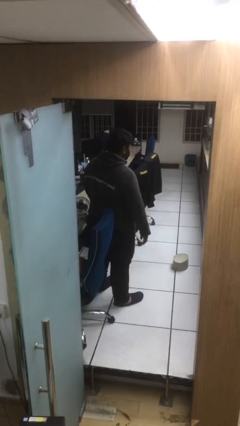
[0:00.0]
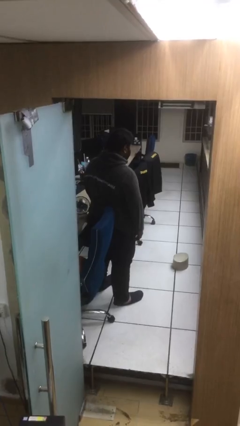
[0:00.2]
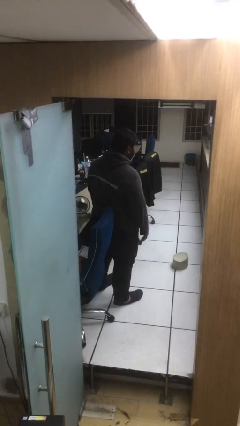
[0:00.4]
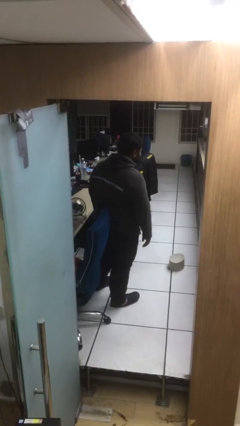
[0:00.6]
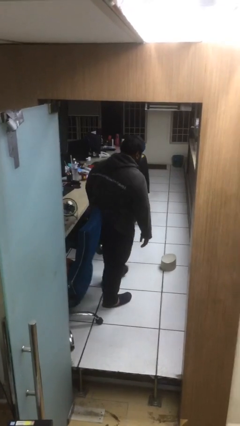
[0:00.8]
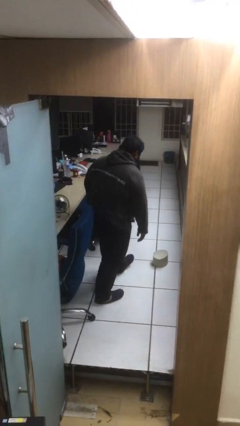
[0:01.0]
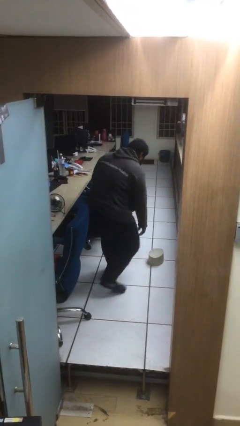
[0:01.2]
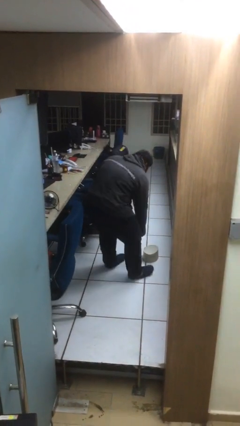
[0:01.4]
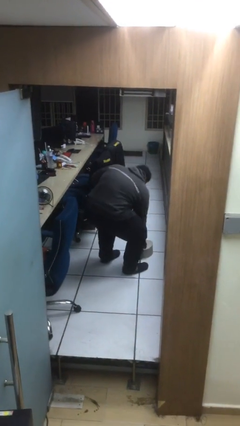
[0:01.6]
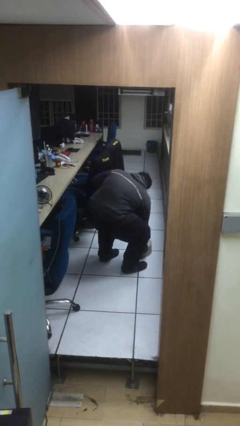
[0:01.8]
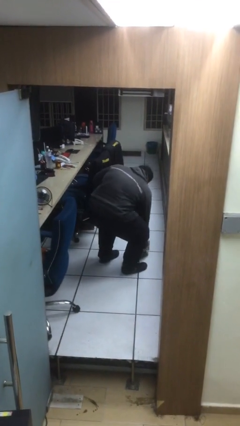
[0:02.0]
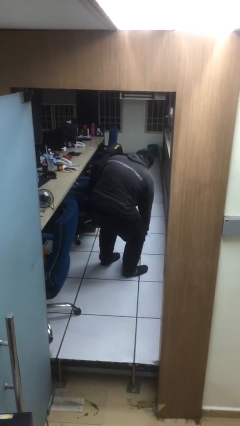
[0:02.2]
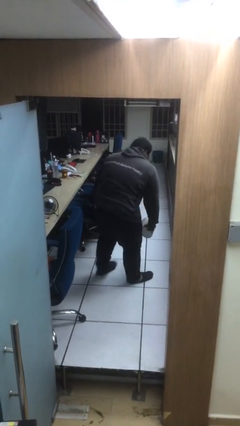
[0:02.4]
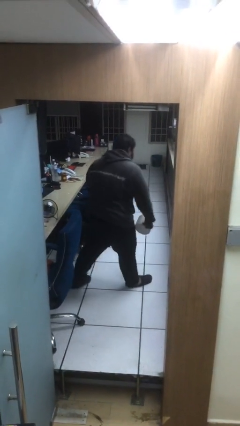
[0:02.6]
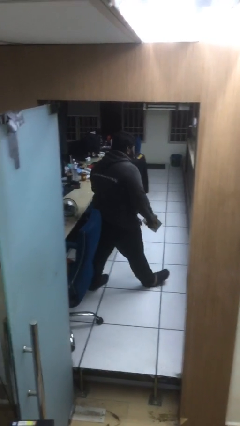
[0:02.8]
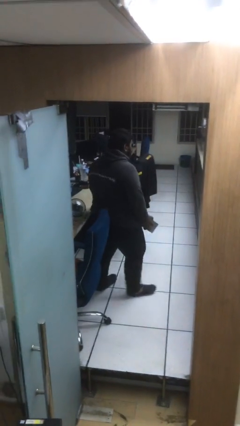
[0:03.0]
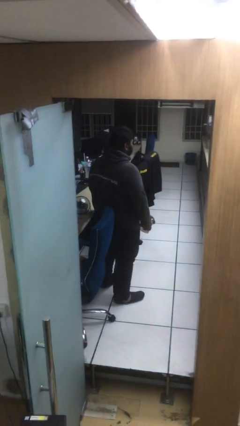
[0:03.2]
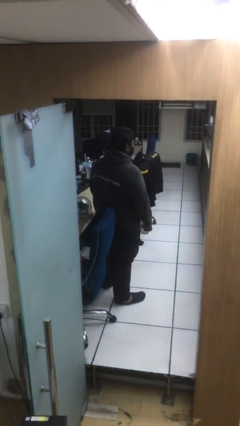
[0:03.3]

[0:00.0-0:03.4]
person picks up object from floor

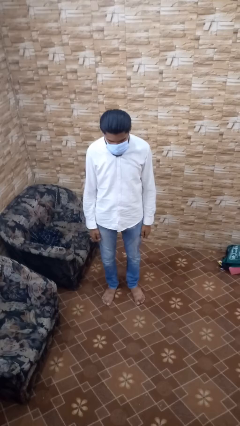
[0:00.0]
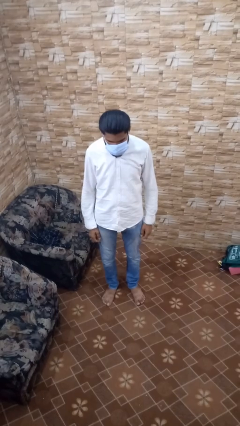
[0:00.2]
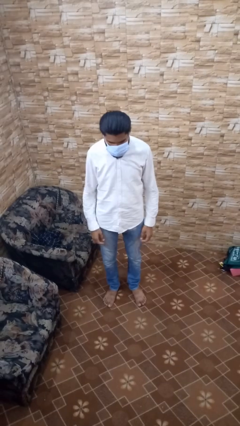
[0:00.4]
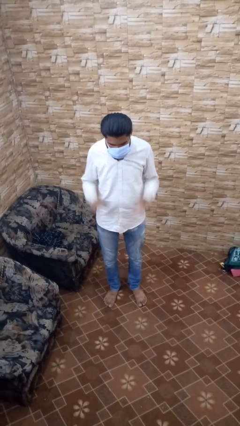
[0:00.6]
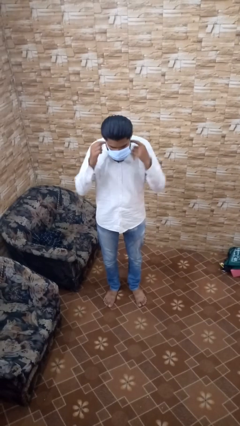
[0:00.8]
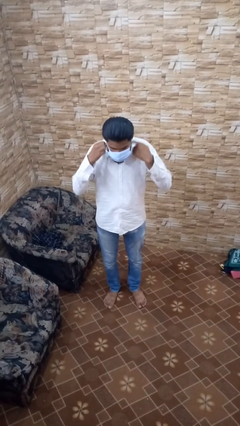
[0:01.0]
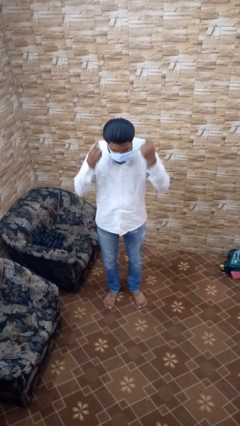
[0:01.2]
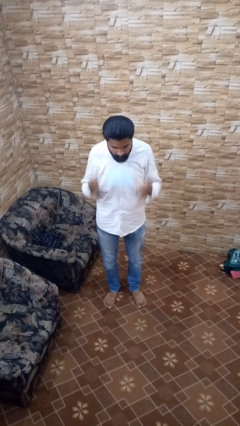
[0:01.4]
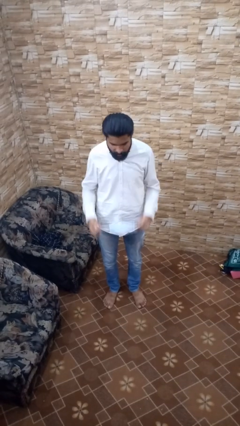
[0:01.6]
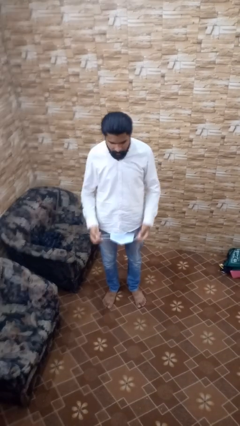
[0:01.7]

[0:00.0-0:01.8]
person takes off facemask

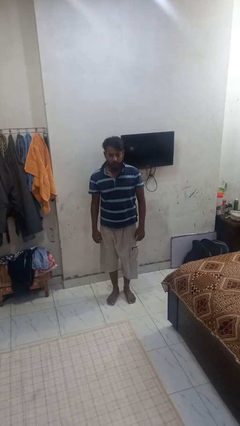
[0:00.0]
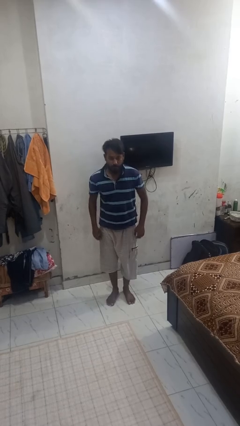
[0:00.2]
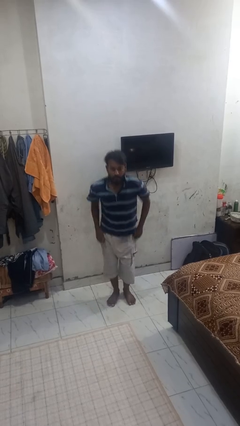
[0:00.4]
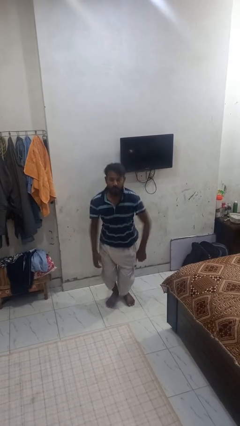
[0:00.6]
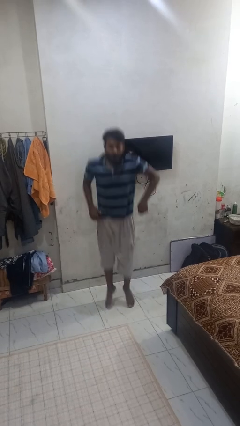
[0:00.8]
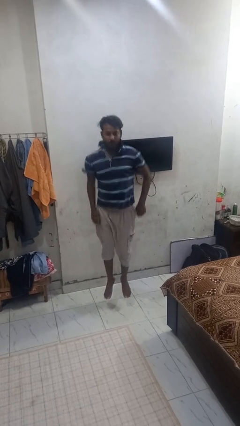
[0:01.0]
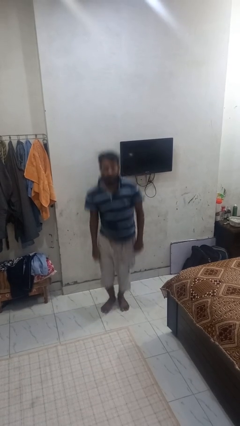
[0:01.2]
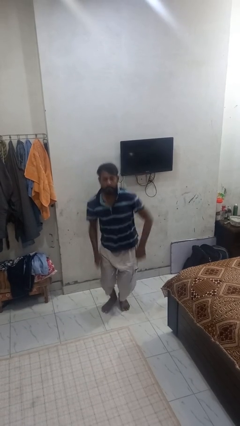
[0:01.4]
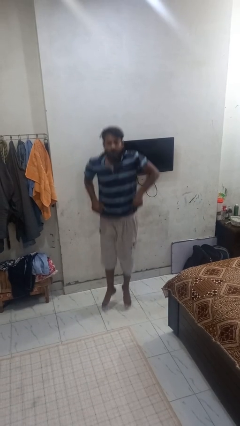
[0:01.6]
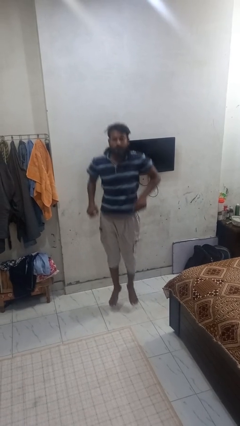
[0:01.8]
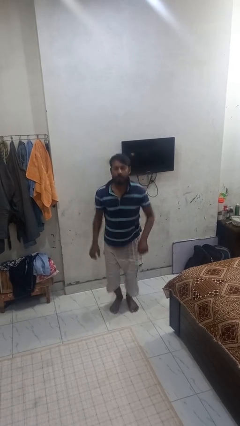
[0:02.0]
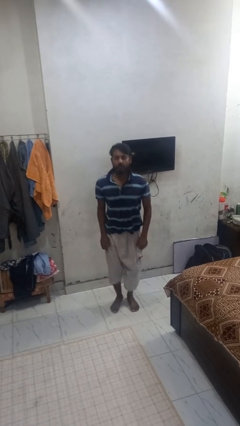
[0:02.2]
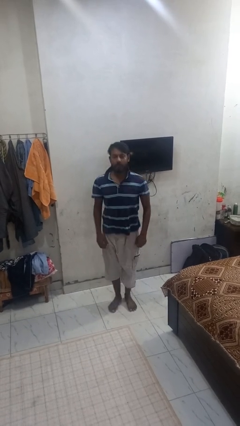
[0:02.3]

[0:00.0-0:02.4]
person jumps

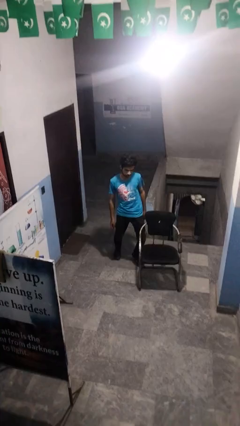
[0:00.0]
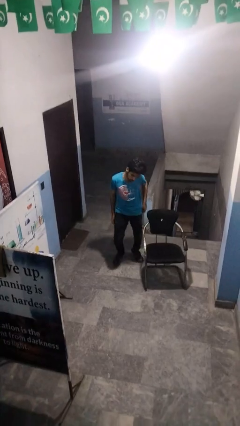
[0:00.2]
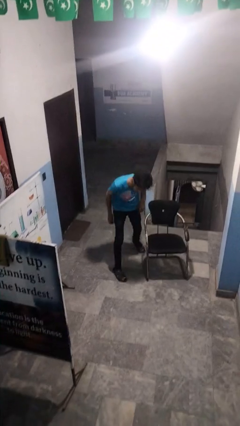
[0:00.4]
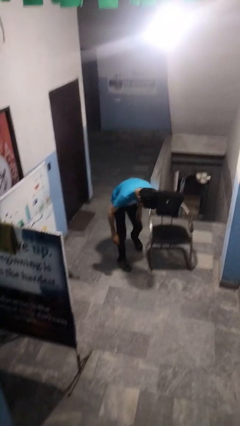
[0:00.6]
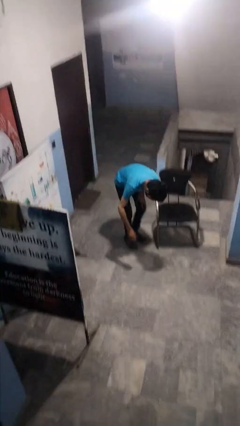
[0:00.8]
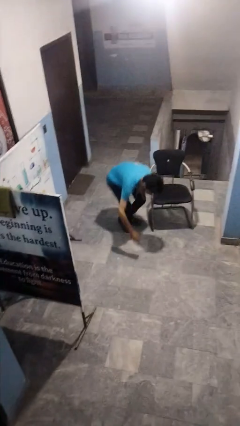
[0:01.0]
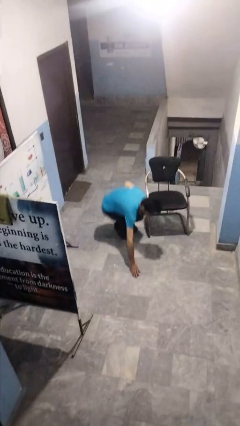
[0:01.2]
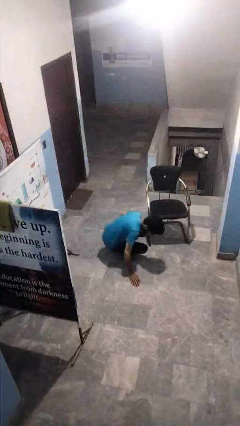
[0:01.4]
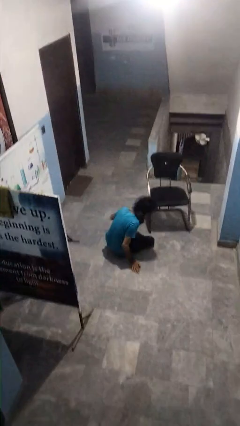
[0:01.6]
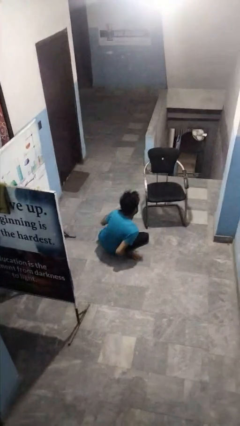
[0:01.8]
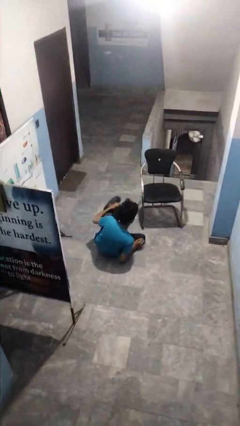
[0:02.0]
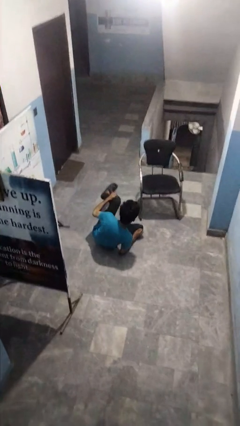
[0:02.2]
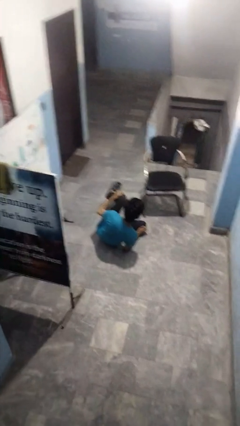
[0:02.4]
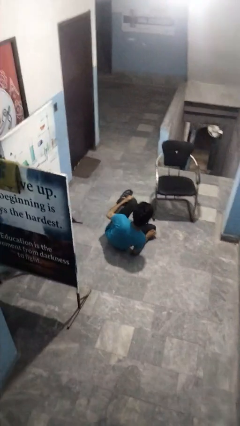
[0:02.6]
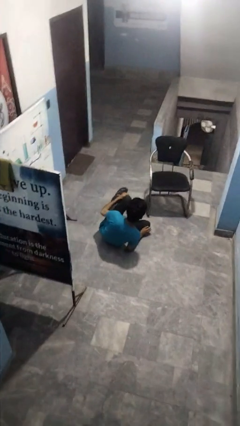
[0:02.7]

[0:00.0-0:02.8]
person trips on object on floor

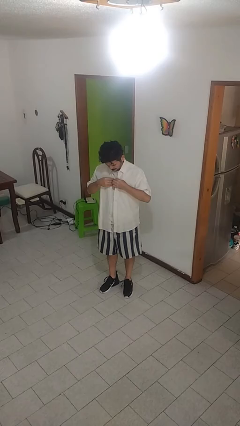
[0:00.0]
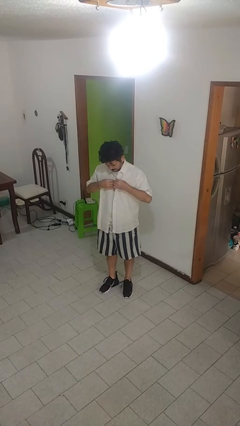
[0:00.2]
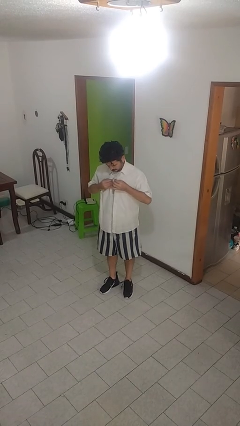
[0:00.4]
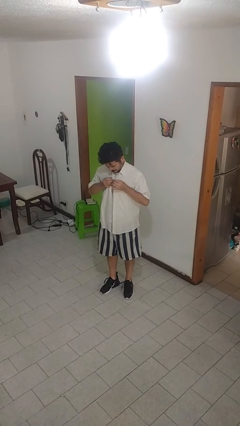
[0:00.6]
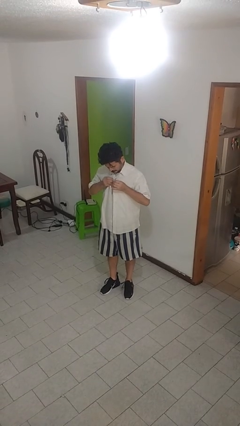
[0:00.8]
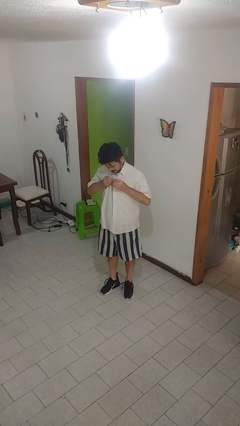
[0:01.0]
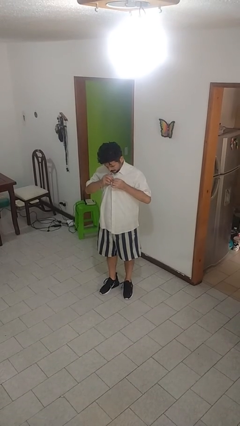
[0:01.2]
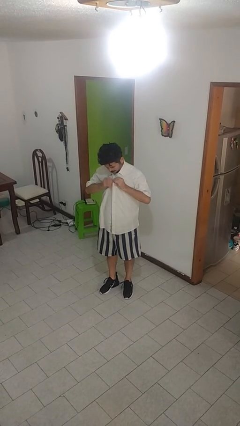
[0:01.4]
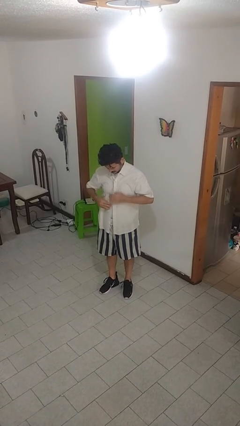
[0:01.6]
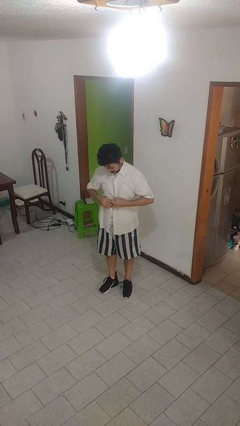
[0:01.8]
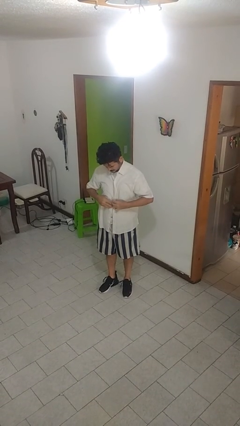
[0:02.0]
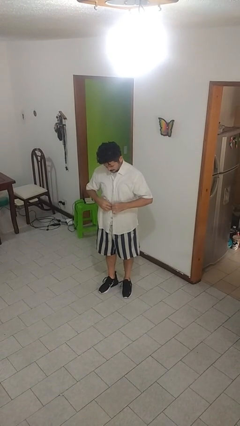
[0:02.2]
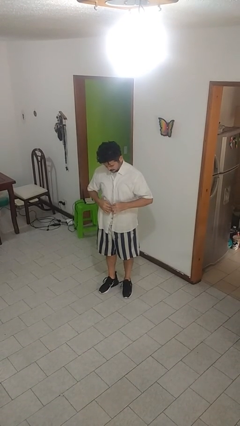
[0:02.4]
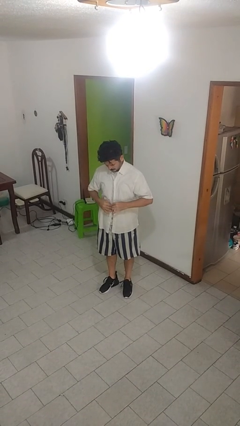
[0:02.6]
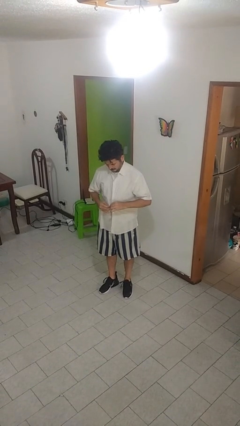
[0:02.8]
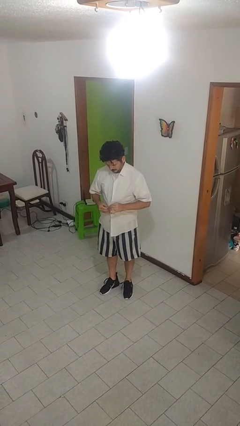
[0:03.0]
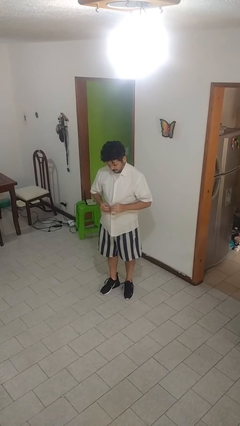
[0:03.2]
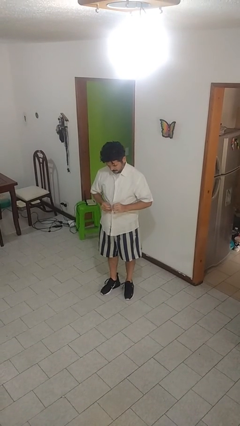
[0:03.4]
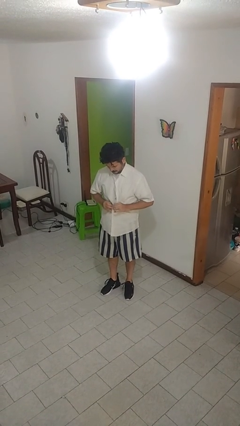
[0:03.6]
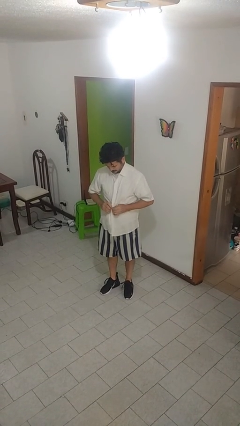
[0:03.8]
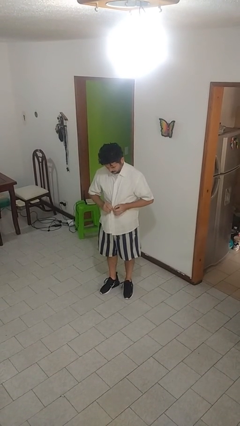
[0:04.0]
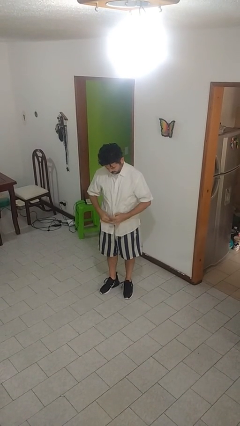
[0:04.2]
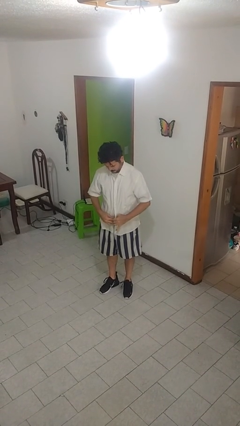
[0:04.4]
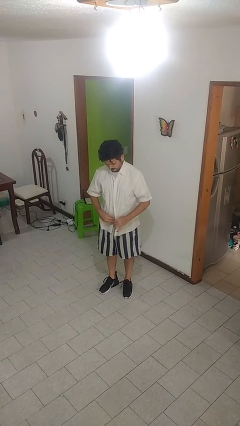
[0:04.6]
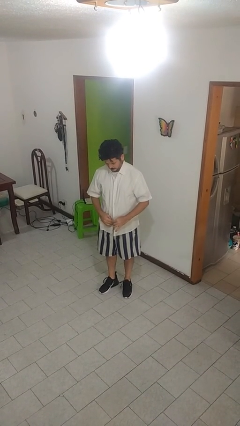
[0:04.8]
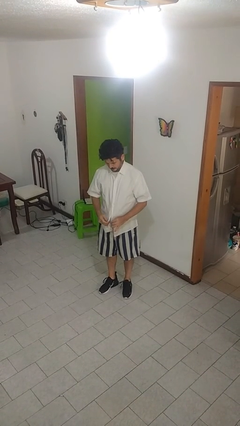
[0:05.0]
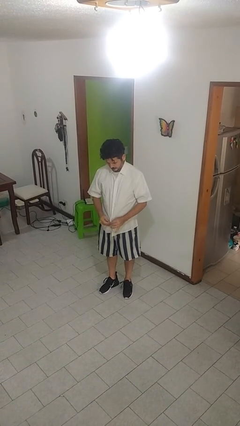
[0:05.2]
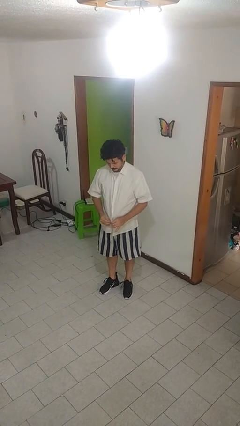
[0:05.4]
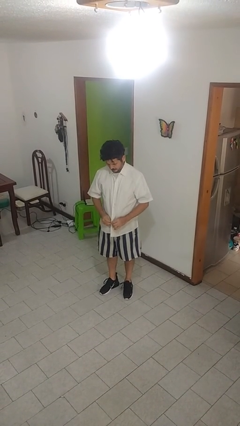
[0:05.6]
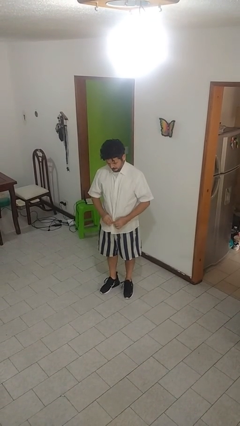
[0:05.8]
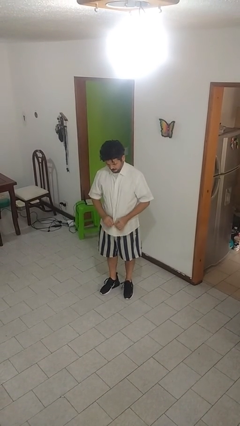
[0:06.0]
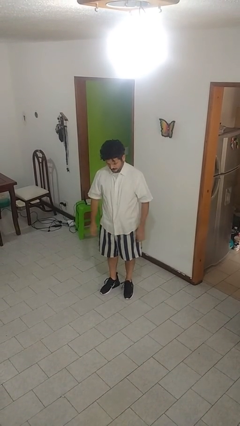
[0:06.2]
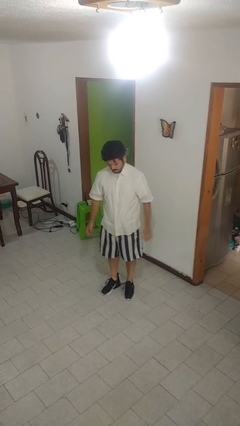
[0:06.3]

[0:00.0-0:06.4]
person buttons shirt

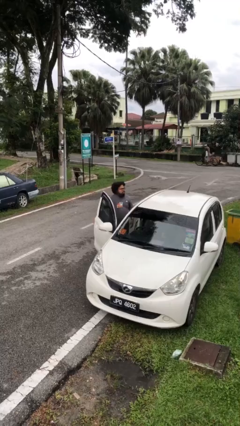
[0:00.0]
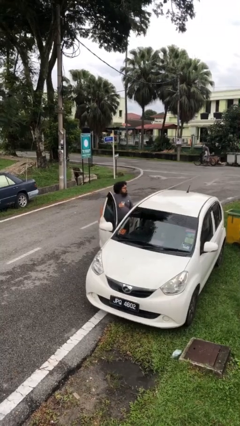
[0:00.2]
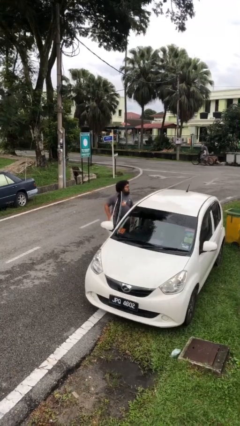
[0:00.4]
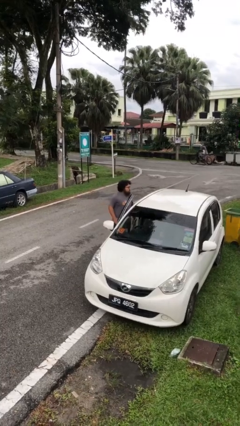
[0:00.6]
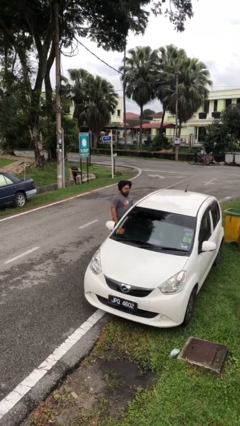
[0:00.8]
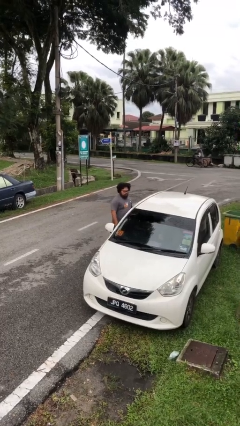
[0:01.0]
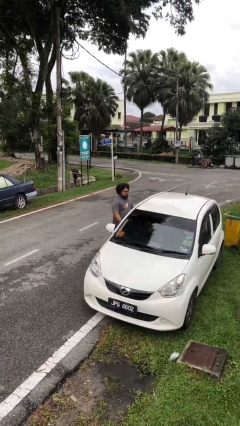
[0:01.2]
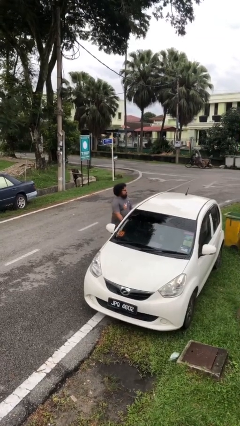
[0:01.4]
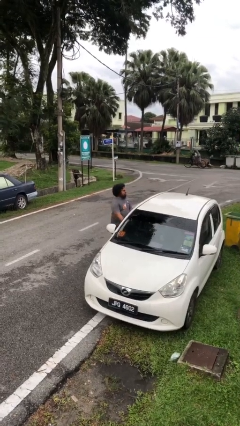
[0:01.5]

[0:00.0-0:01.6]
person closes car door
